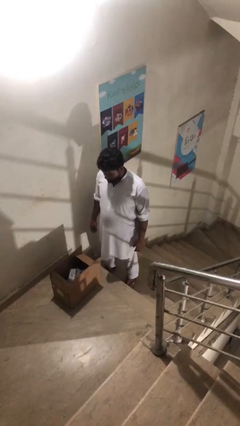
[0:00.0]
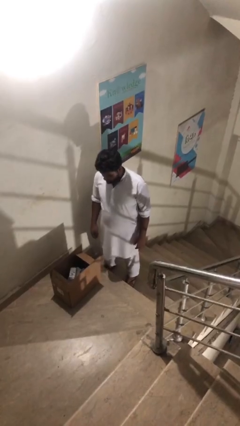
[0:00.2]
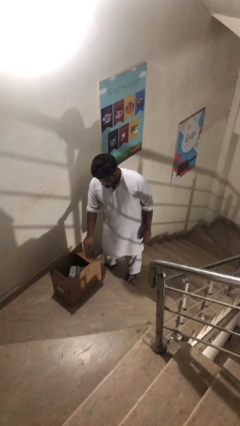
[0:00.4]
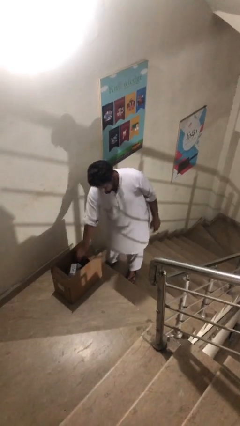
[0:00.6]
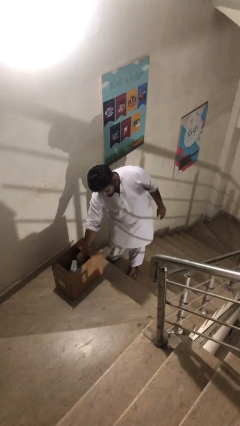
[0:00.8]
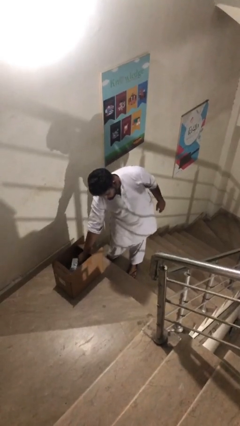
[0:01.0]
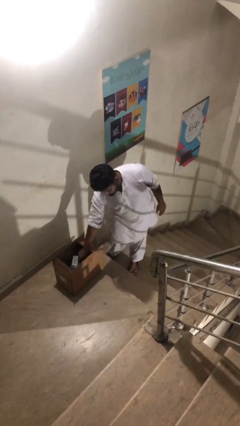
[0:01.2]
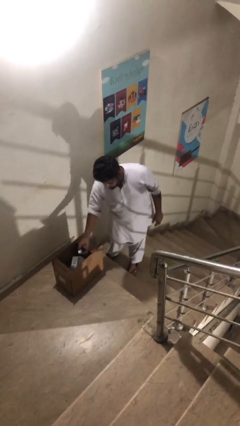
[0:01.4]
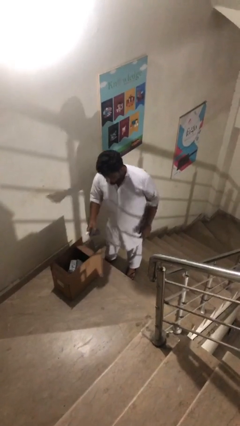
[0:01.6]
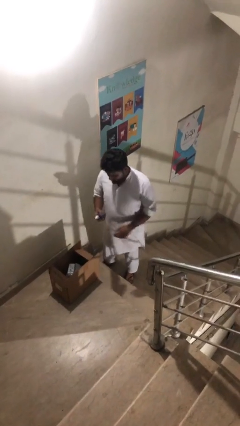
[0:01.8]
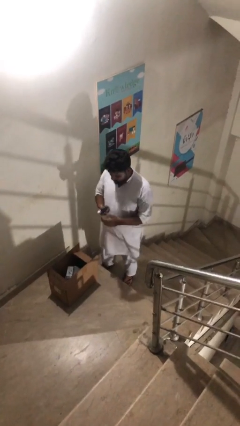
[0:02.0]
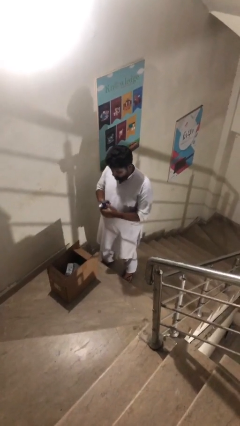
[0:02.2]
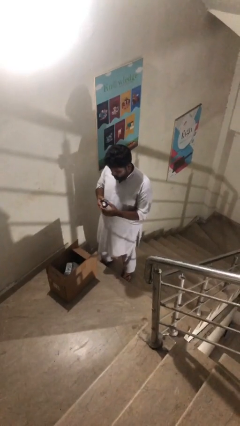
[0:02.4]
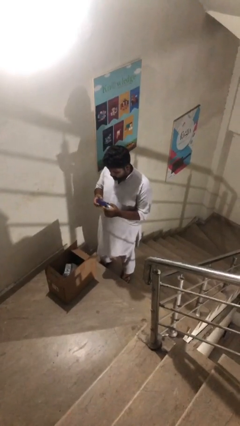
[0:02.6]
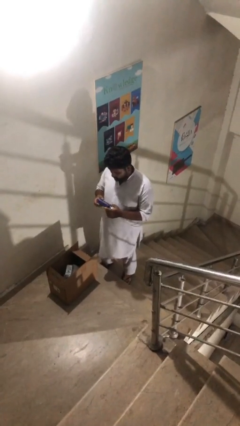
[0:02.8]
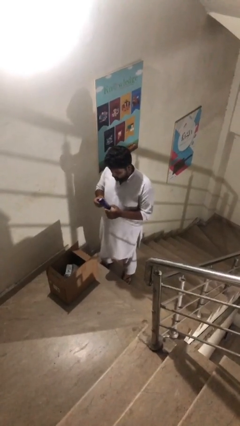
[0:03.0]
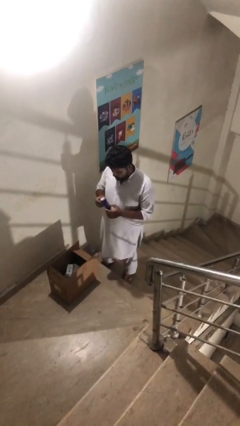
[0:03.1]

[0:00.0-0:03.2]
person takes object from box

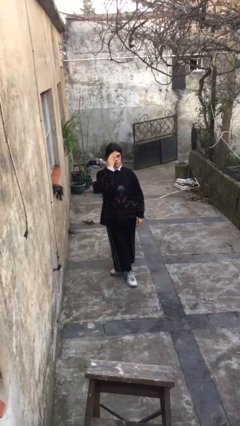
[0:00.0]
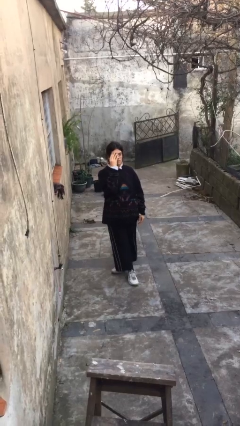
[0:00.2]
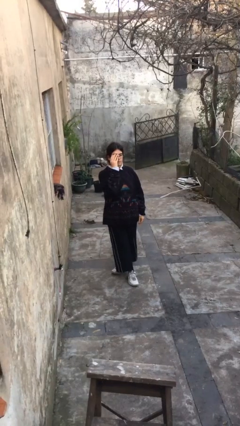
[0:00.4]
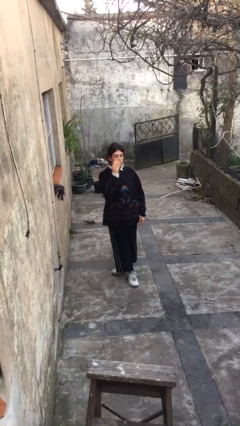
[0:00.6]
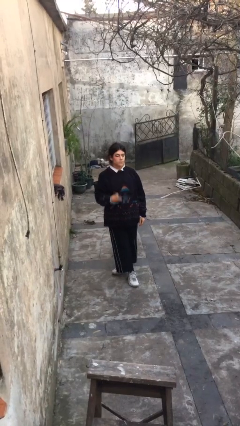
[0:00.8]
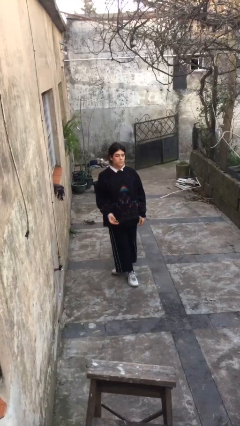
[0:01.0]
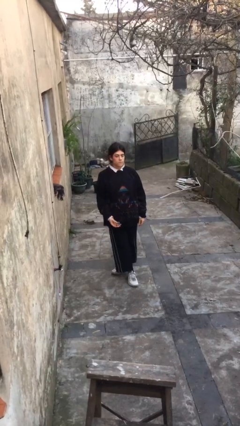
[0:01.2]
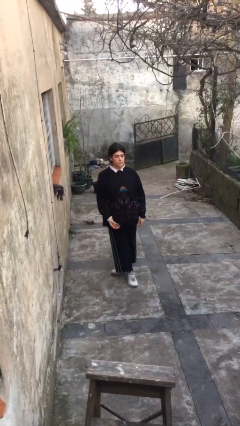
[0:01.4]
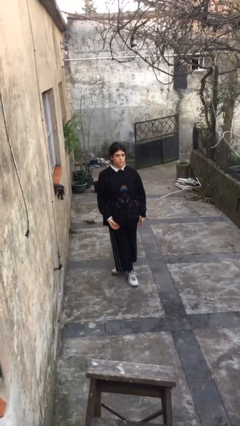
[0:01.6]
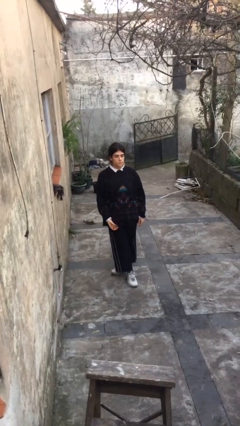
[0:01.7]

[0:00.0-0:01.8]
person takes off glasses

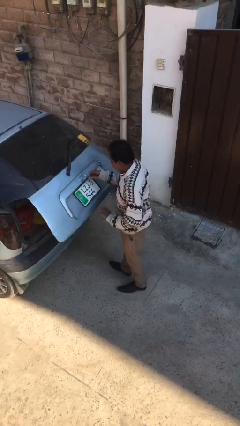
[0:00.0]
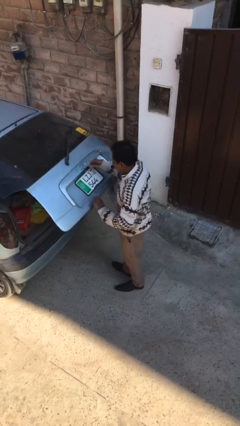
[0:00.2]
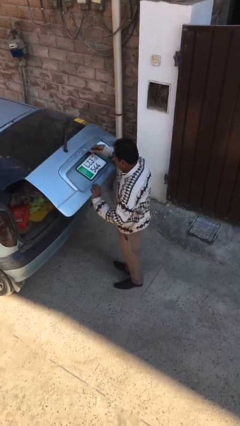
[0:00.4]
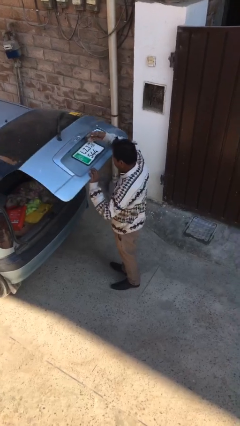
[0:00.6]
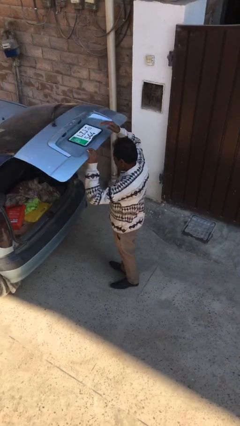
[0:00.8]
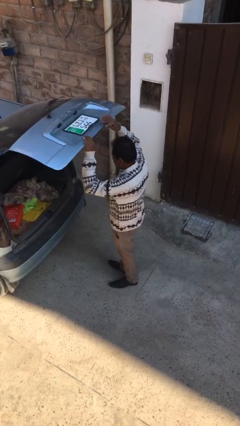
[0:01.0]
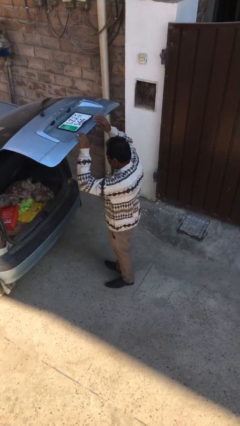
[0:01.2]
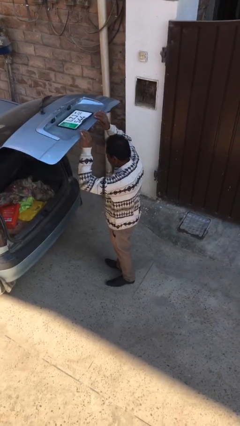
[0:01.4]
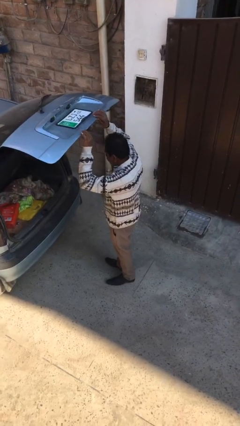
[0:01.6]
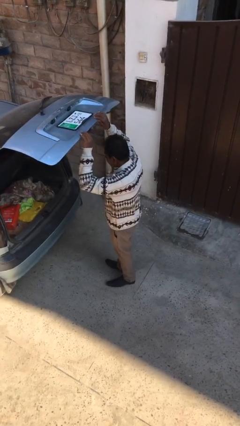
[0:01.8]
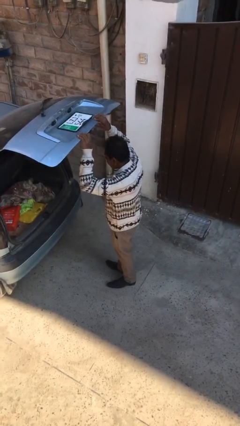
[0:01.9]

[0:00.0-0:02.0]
person opens car trunk

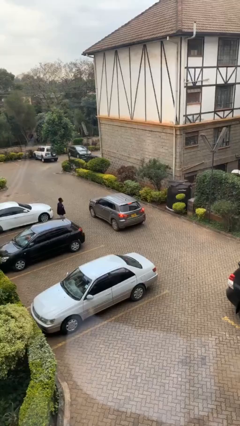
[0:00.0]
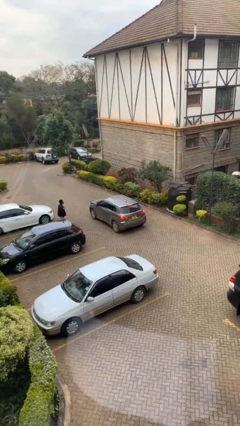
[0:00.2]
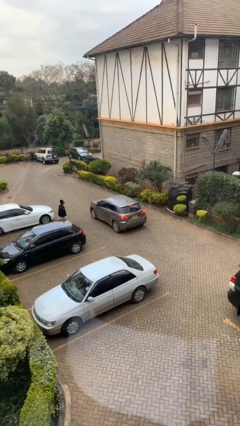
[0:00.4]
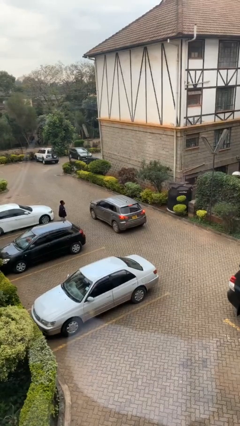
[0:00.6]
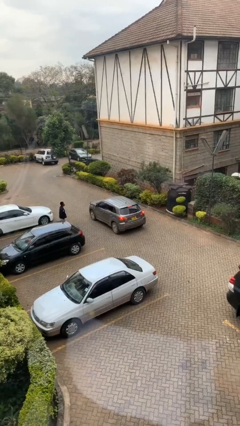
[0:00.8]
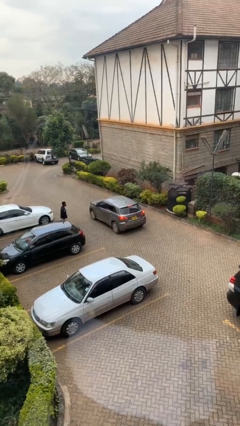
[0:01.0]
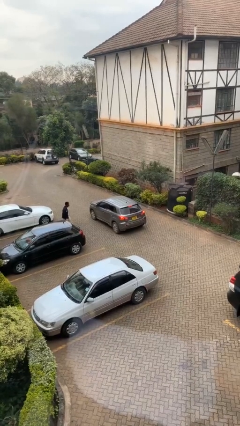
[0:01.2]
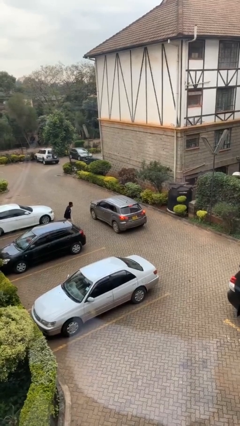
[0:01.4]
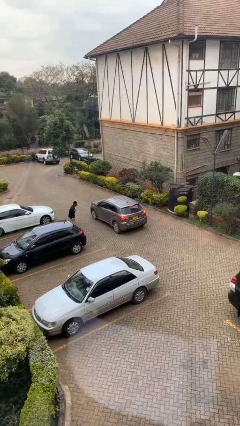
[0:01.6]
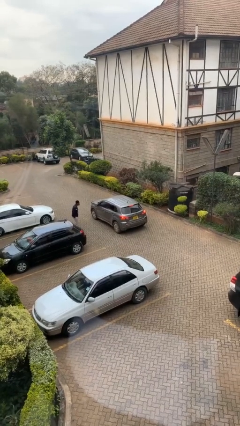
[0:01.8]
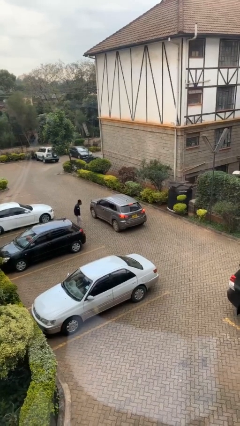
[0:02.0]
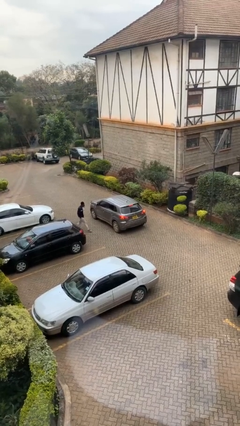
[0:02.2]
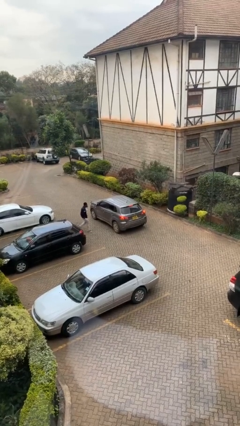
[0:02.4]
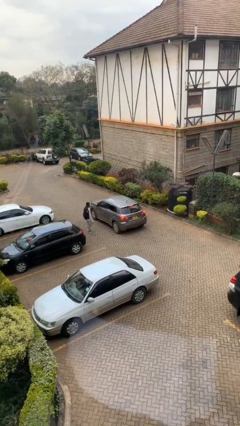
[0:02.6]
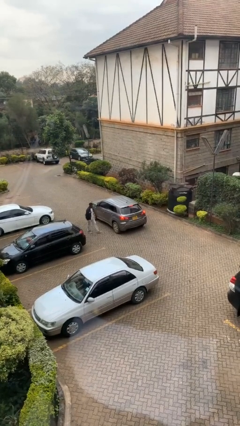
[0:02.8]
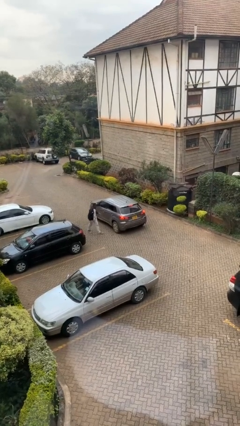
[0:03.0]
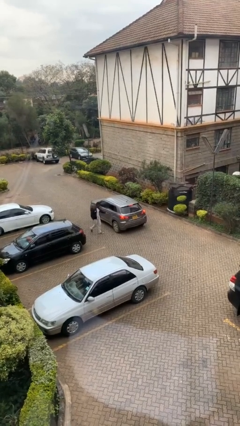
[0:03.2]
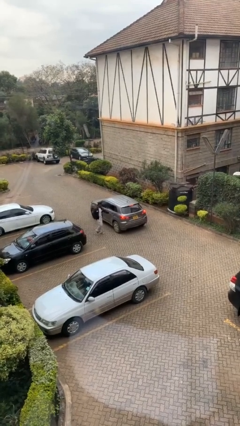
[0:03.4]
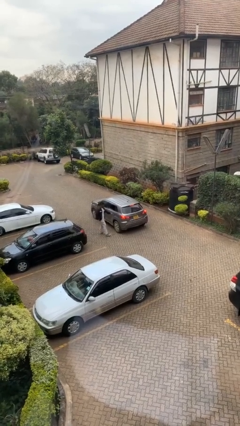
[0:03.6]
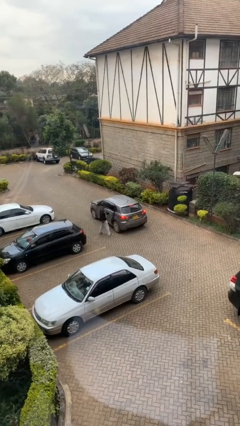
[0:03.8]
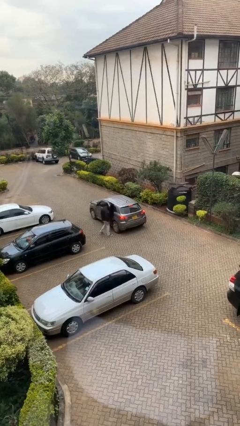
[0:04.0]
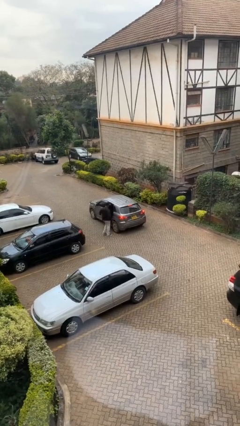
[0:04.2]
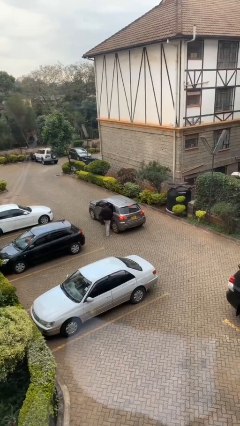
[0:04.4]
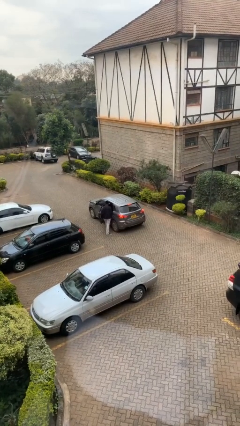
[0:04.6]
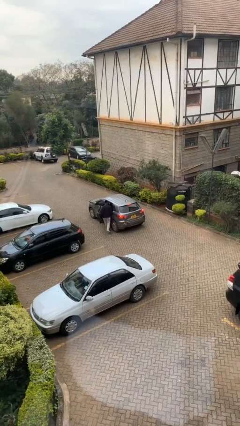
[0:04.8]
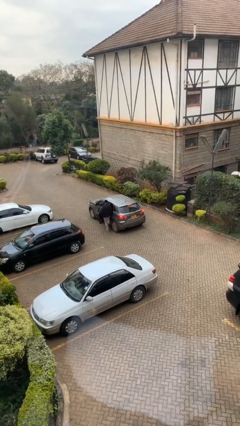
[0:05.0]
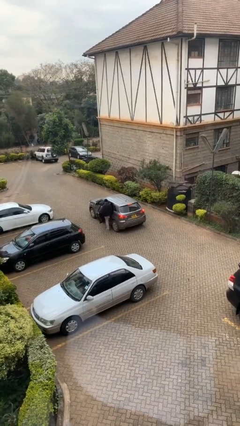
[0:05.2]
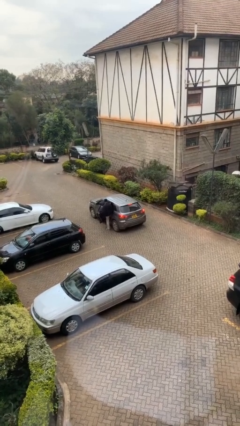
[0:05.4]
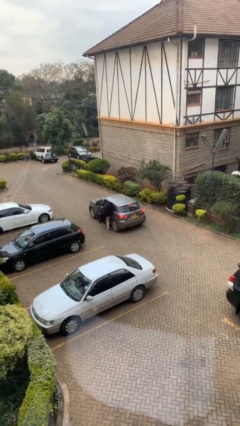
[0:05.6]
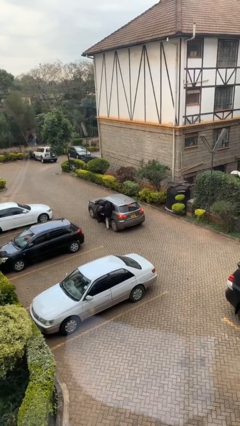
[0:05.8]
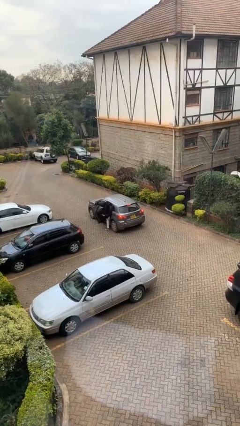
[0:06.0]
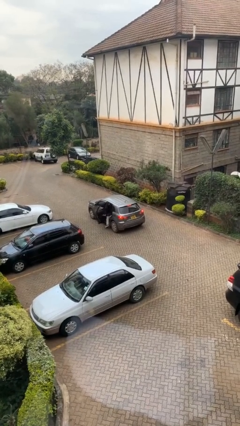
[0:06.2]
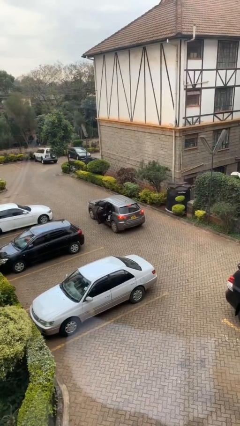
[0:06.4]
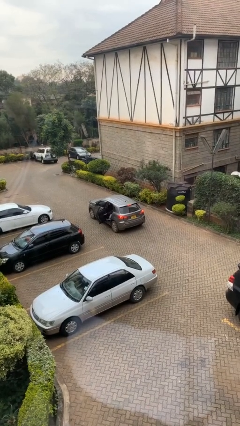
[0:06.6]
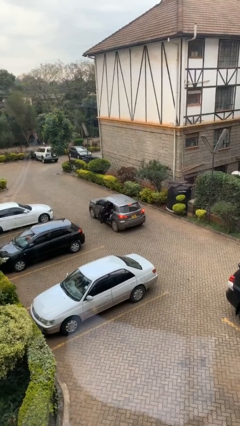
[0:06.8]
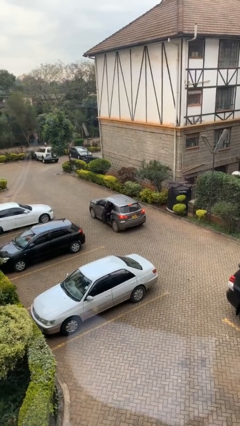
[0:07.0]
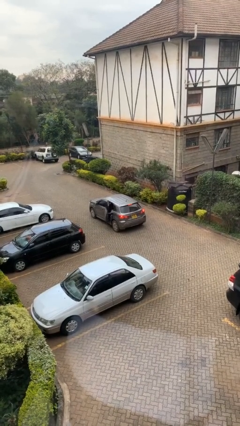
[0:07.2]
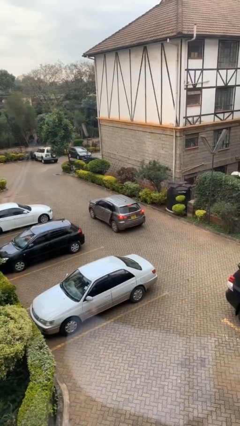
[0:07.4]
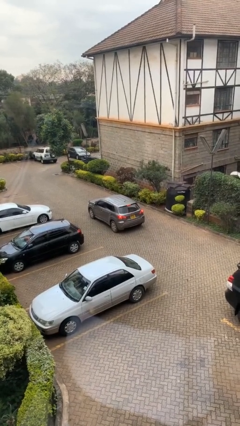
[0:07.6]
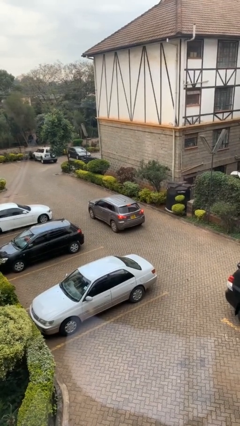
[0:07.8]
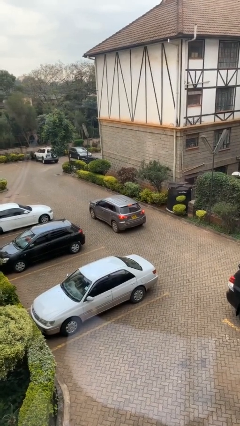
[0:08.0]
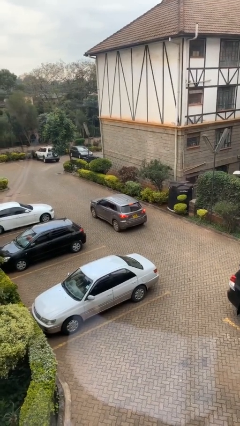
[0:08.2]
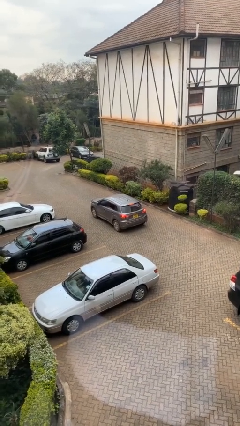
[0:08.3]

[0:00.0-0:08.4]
car picks up person

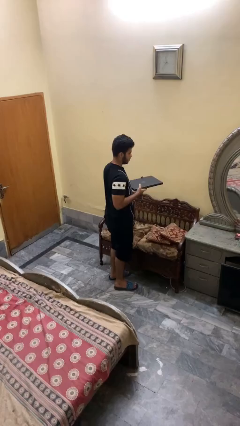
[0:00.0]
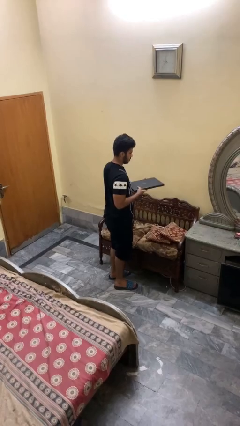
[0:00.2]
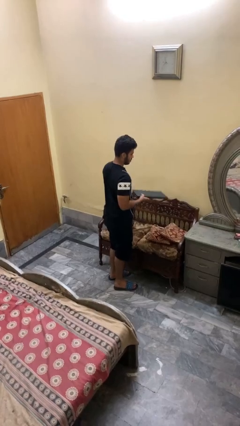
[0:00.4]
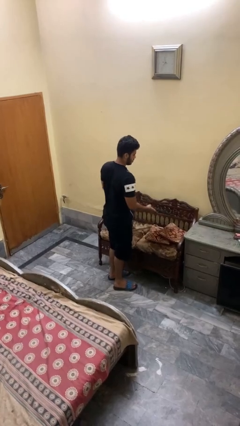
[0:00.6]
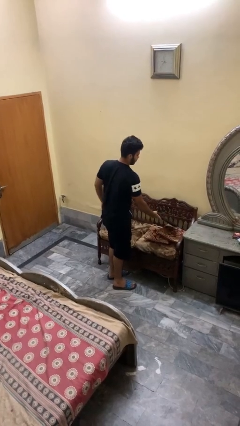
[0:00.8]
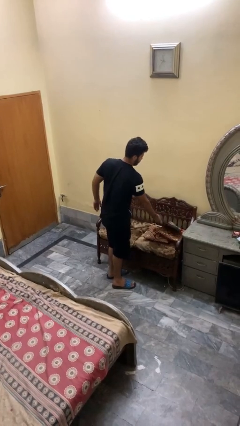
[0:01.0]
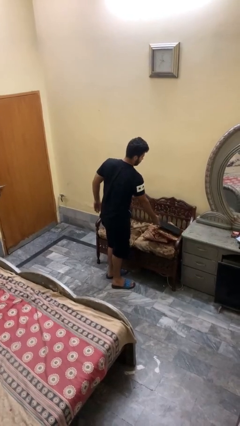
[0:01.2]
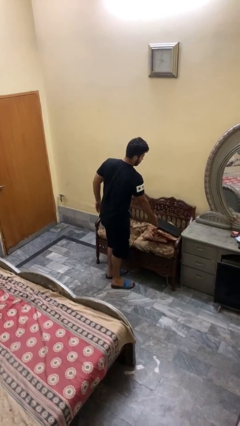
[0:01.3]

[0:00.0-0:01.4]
person puts down object on couch

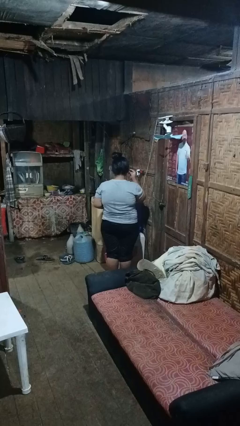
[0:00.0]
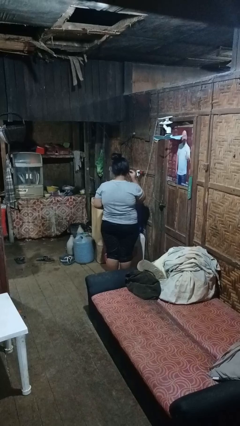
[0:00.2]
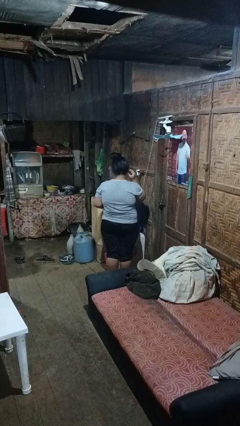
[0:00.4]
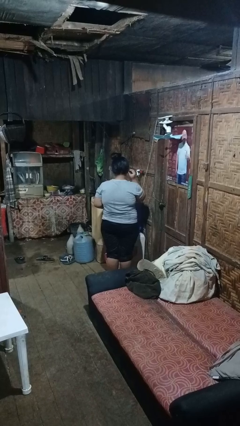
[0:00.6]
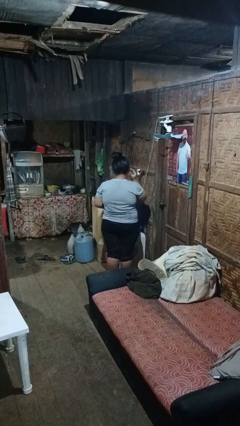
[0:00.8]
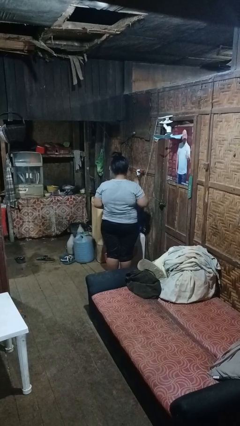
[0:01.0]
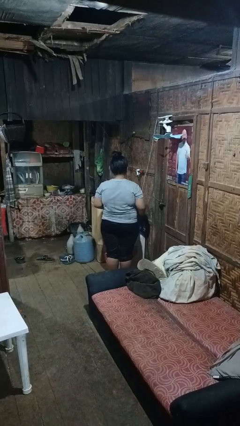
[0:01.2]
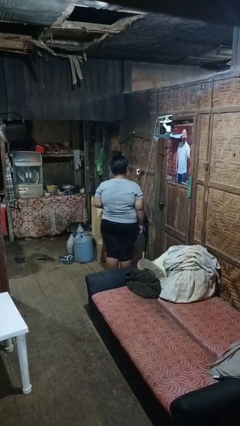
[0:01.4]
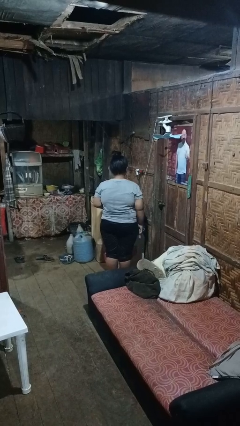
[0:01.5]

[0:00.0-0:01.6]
person puts on headphones
